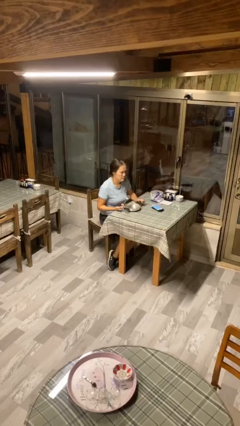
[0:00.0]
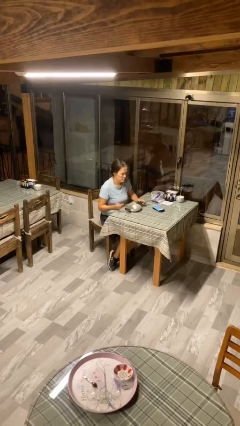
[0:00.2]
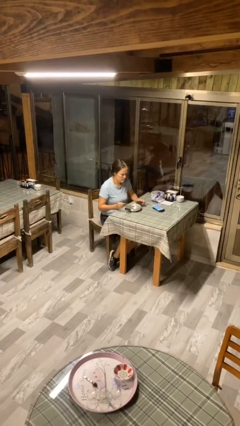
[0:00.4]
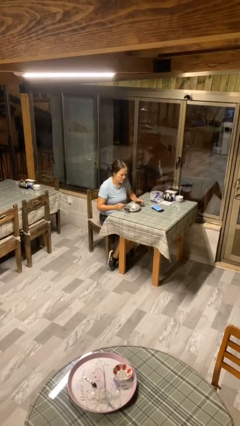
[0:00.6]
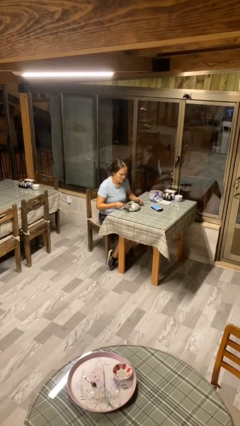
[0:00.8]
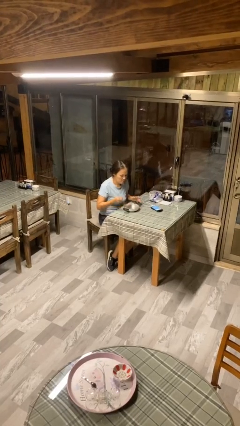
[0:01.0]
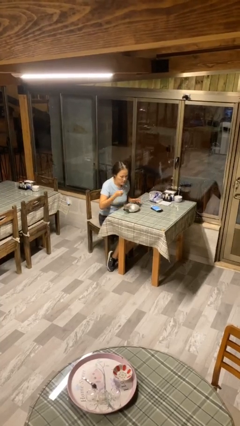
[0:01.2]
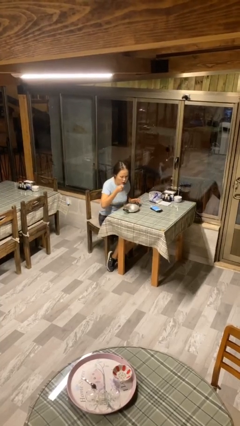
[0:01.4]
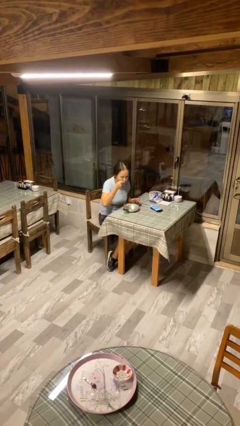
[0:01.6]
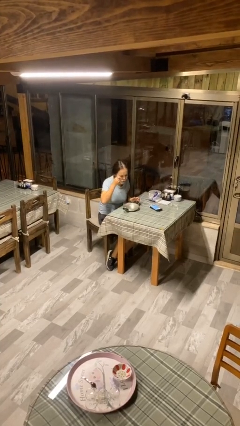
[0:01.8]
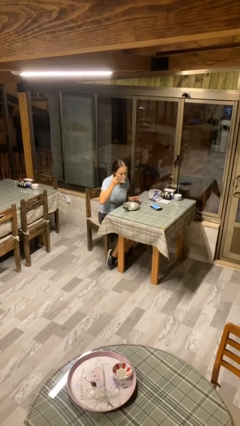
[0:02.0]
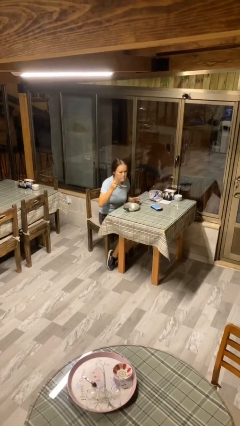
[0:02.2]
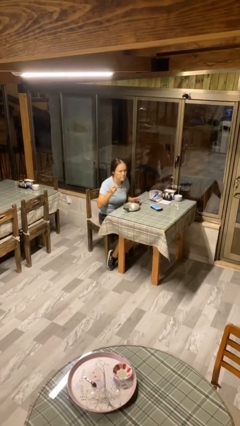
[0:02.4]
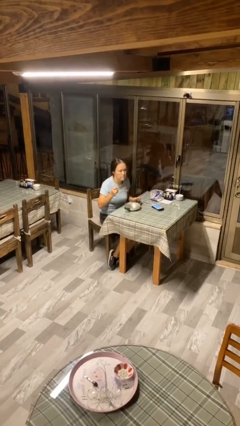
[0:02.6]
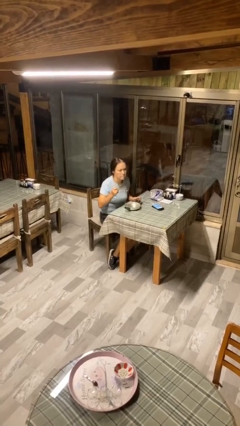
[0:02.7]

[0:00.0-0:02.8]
person eats with utensil

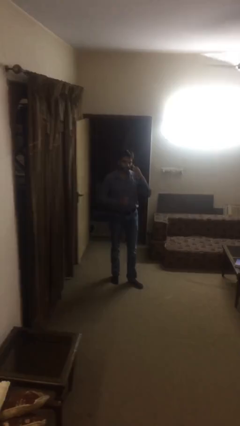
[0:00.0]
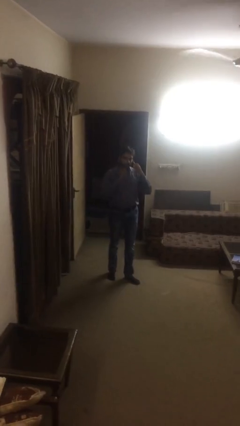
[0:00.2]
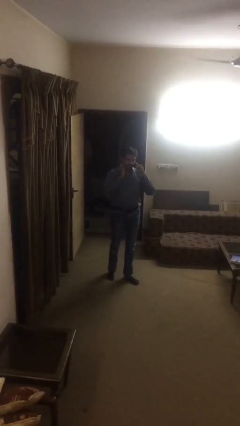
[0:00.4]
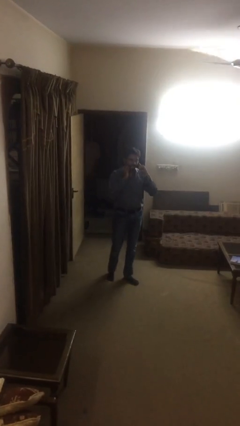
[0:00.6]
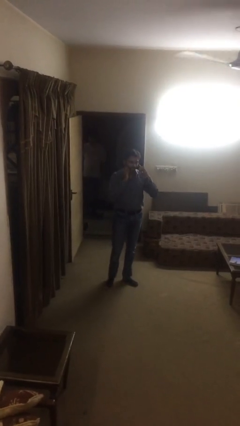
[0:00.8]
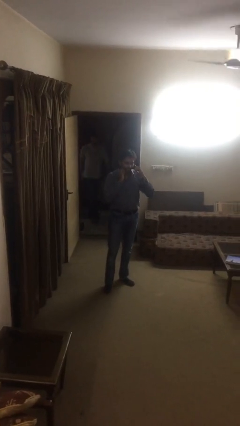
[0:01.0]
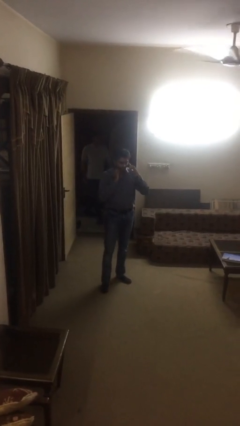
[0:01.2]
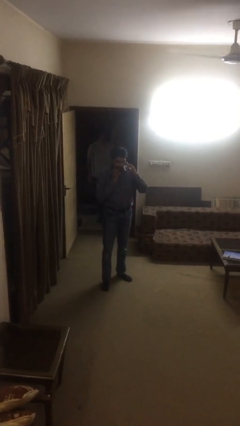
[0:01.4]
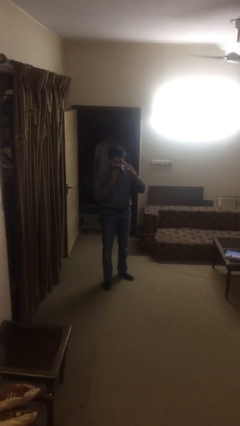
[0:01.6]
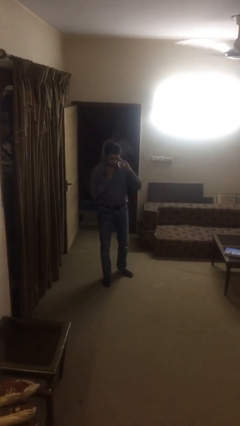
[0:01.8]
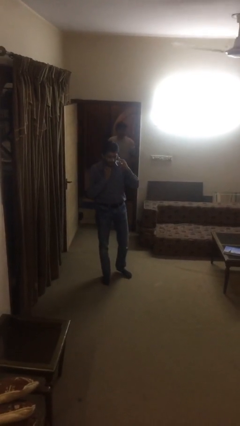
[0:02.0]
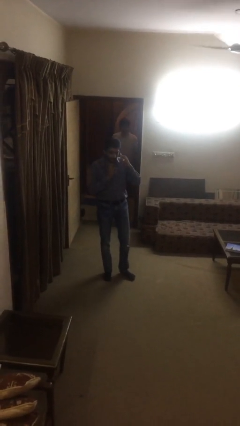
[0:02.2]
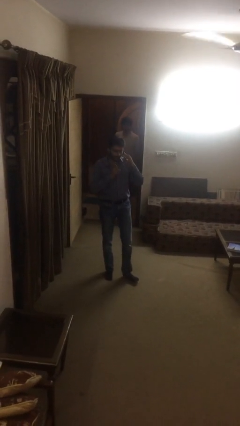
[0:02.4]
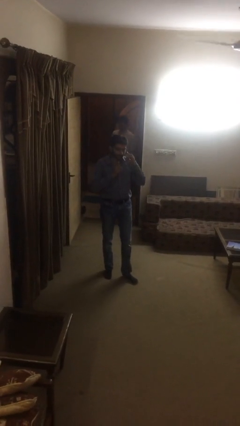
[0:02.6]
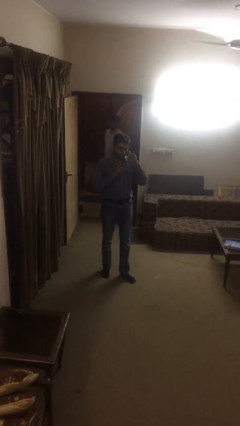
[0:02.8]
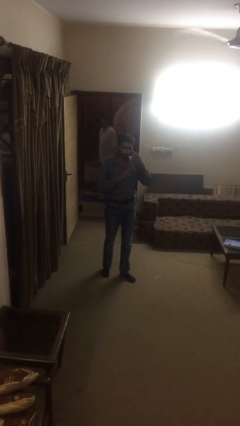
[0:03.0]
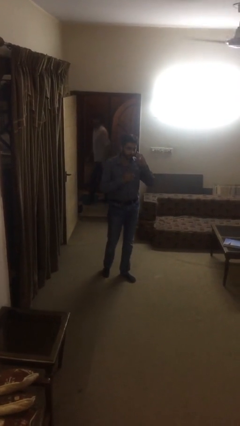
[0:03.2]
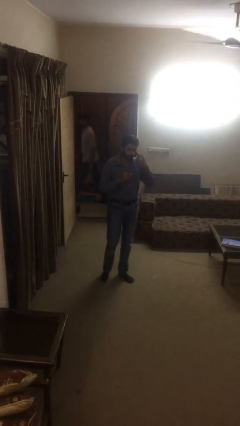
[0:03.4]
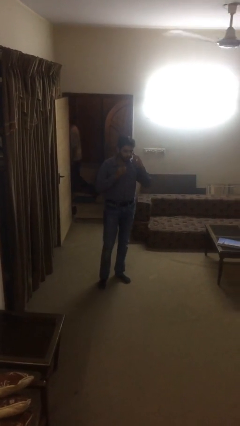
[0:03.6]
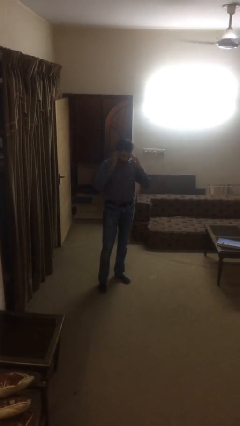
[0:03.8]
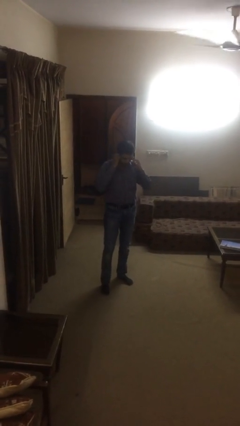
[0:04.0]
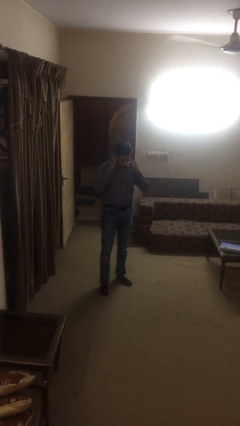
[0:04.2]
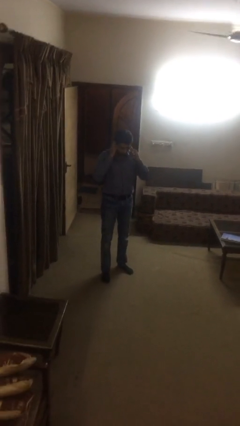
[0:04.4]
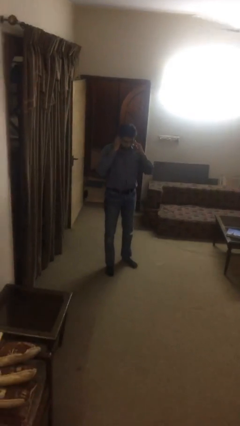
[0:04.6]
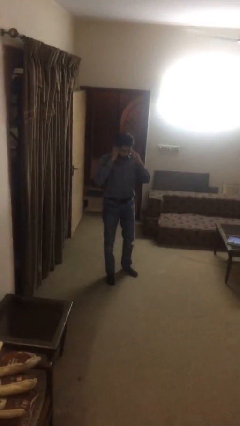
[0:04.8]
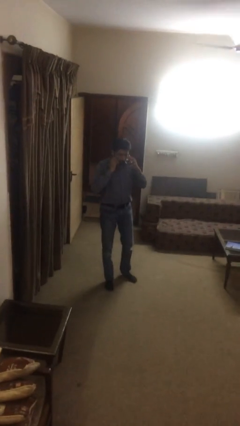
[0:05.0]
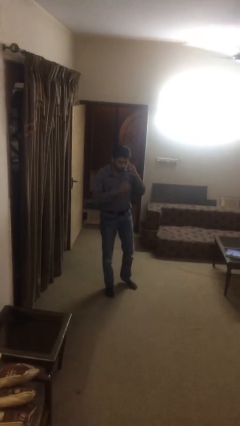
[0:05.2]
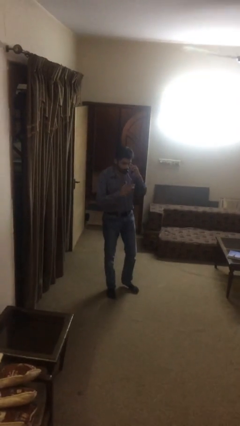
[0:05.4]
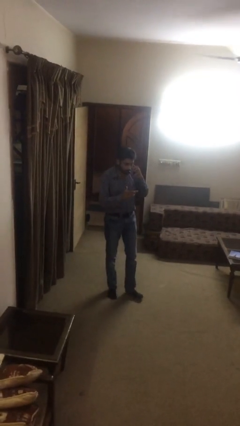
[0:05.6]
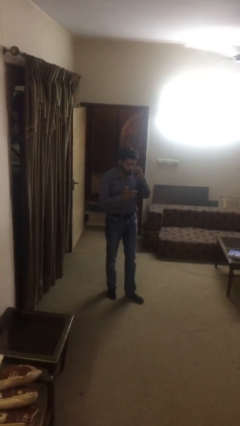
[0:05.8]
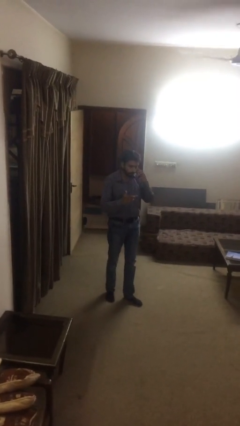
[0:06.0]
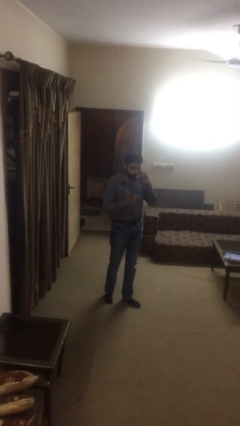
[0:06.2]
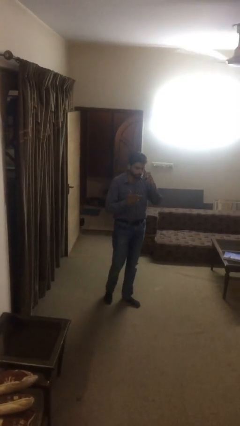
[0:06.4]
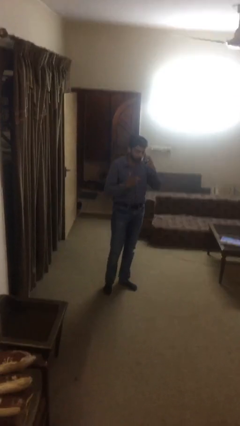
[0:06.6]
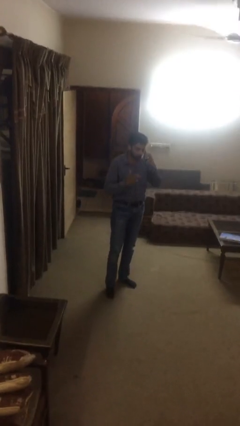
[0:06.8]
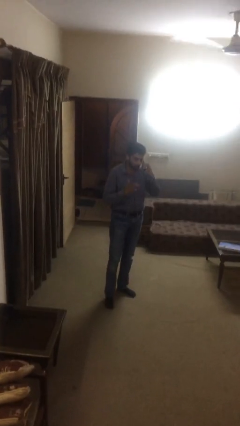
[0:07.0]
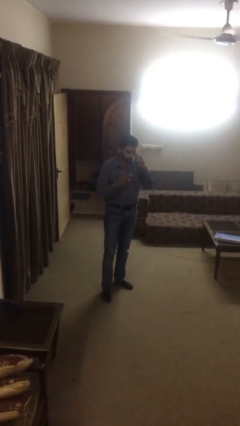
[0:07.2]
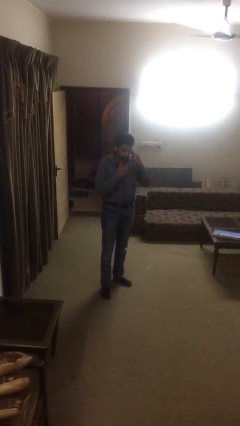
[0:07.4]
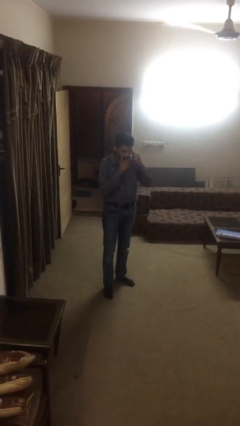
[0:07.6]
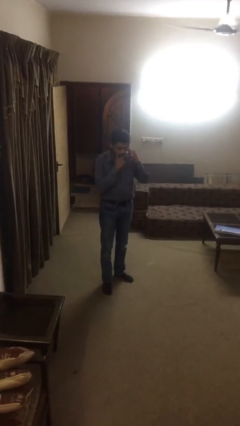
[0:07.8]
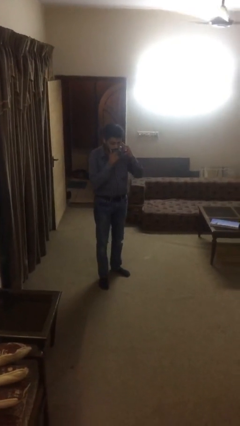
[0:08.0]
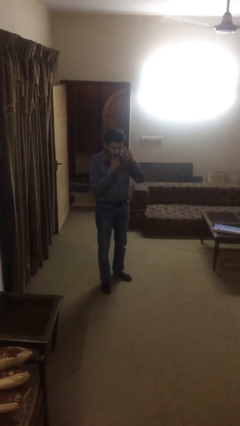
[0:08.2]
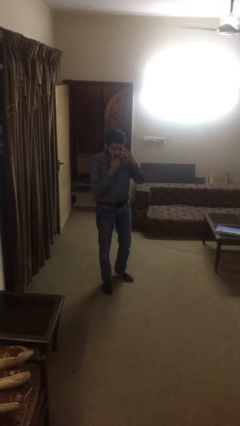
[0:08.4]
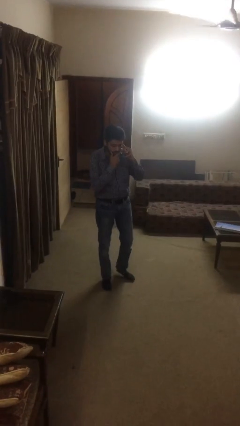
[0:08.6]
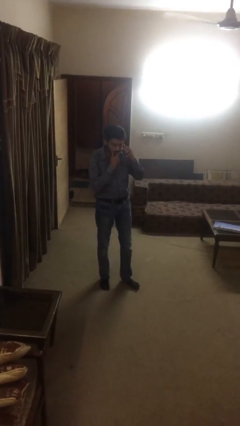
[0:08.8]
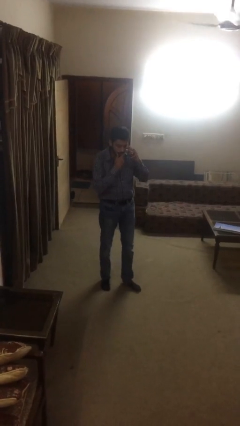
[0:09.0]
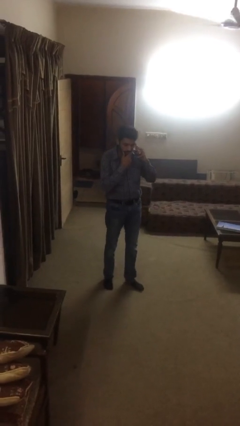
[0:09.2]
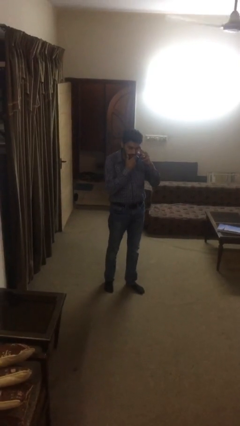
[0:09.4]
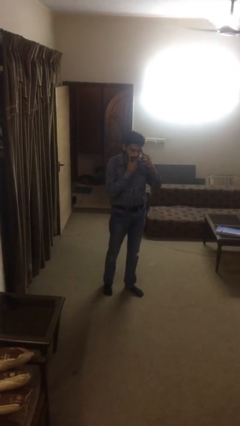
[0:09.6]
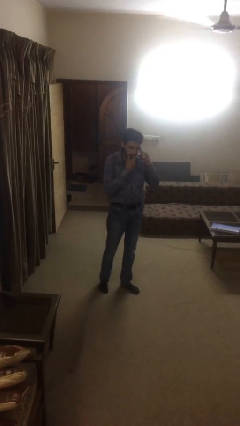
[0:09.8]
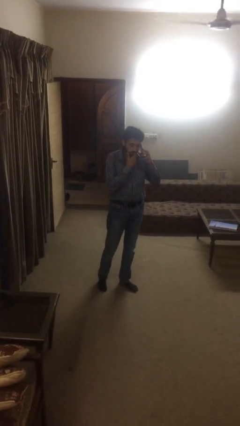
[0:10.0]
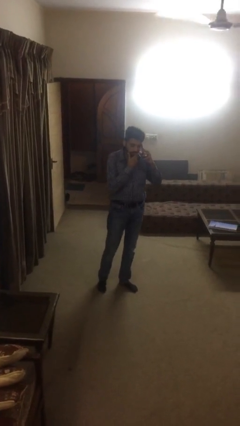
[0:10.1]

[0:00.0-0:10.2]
person talks on phone

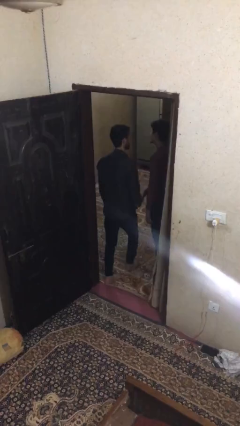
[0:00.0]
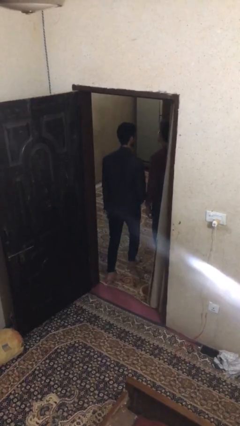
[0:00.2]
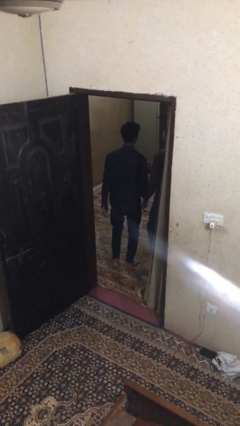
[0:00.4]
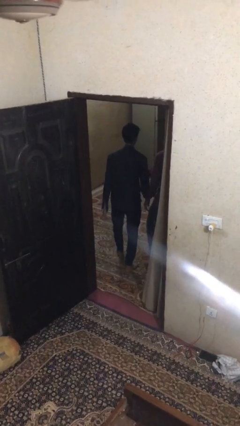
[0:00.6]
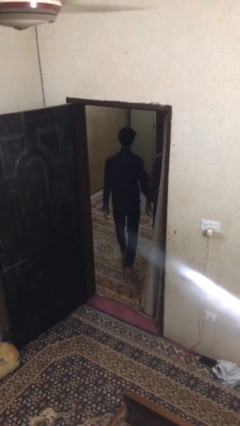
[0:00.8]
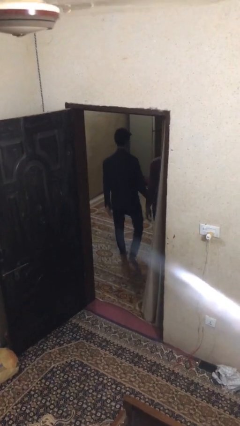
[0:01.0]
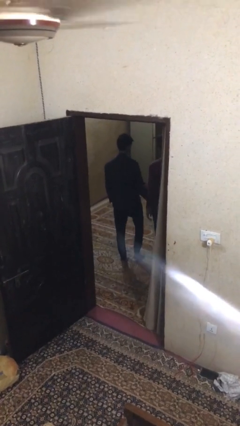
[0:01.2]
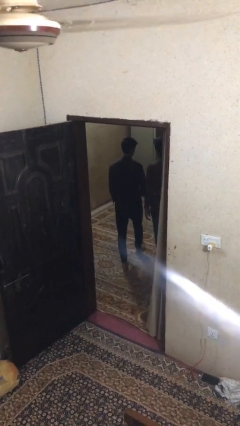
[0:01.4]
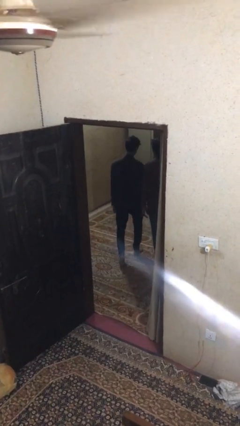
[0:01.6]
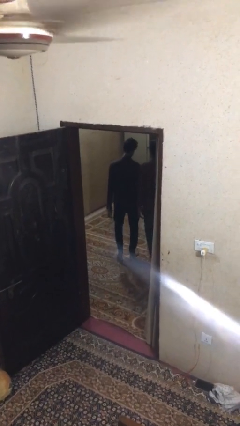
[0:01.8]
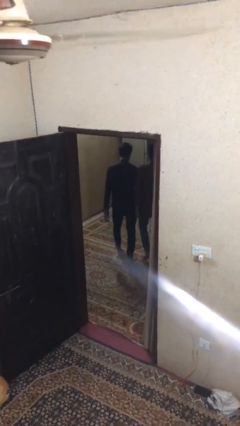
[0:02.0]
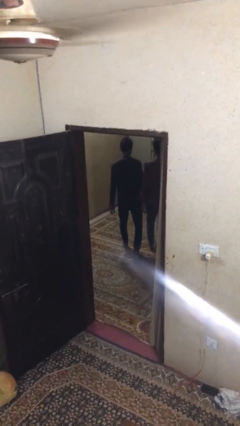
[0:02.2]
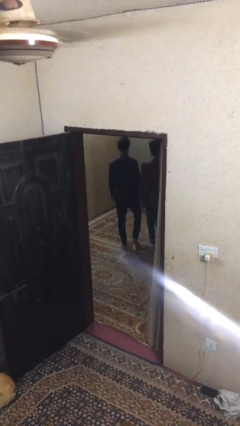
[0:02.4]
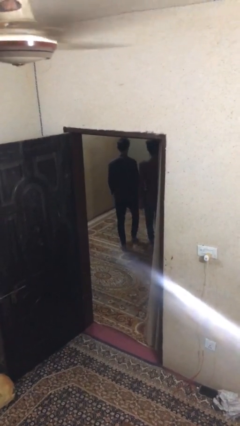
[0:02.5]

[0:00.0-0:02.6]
person talks to person

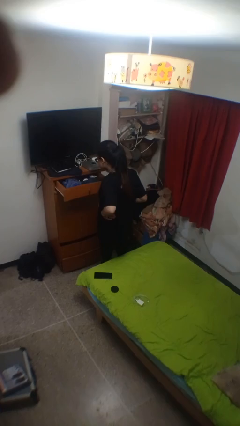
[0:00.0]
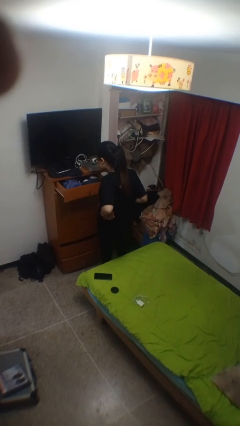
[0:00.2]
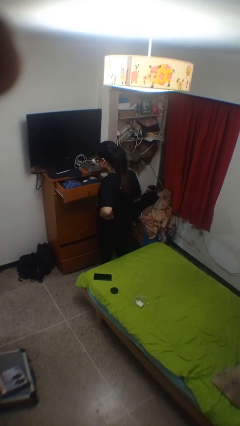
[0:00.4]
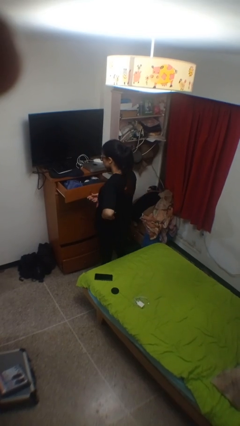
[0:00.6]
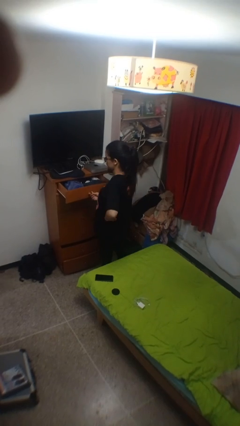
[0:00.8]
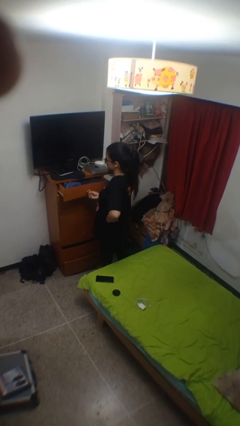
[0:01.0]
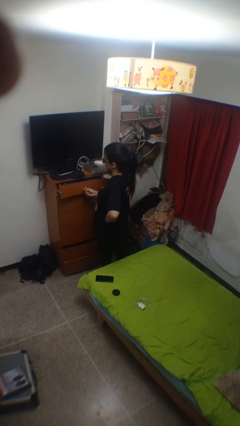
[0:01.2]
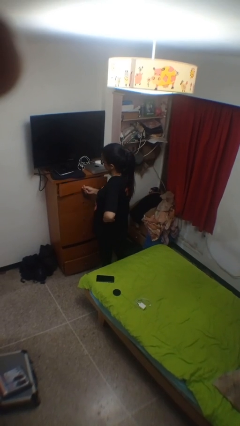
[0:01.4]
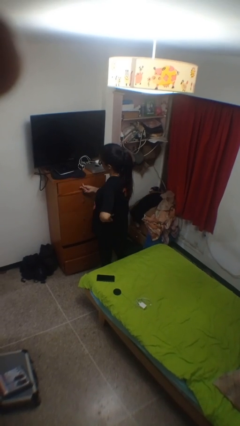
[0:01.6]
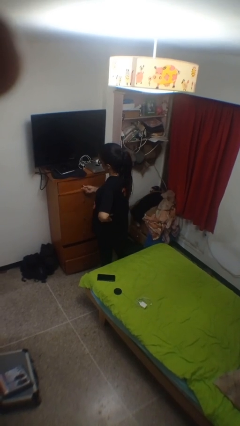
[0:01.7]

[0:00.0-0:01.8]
person closes dresser drawer

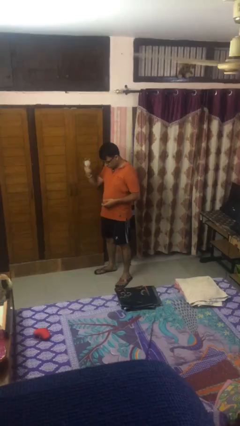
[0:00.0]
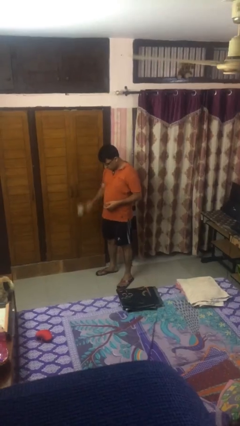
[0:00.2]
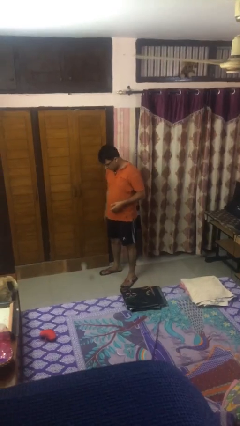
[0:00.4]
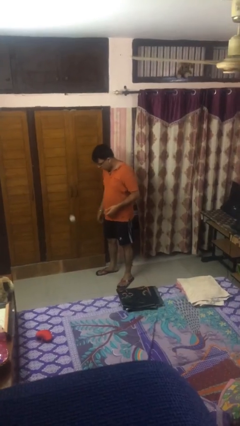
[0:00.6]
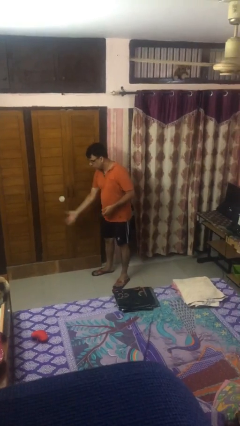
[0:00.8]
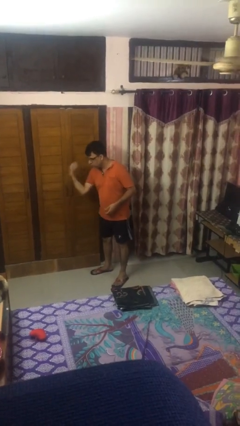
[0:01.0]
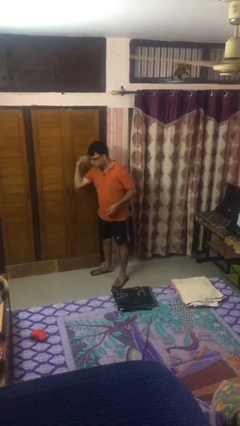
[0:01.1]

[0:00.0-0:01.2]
person bounces ball on floor
